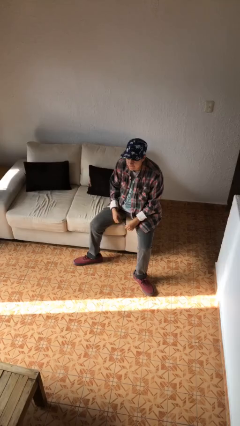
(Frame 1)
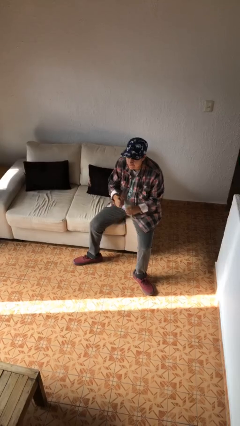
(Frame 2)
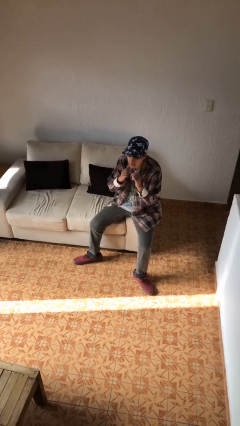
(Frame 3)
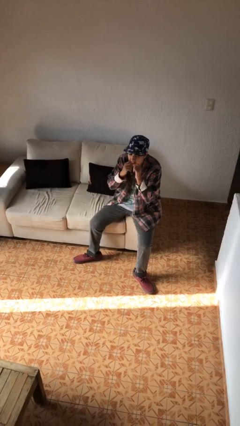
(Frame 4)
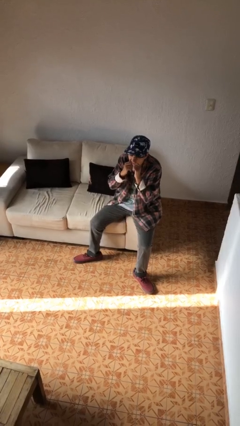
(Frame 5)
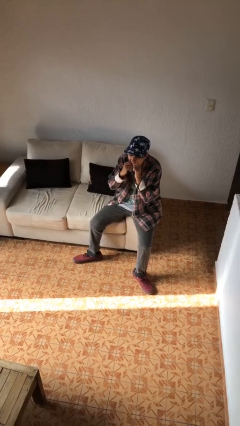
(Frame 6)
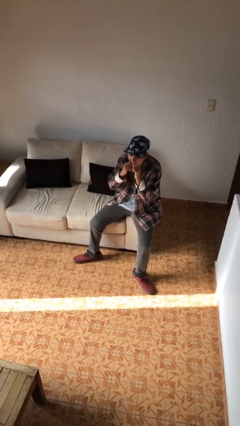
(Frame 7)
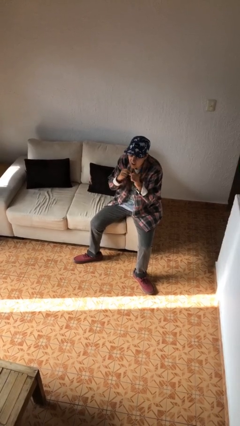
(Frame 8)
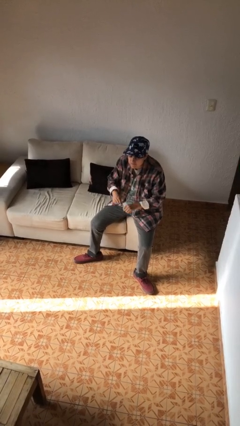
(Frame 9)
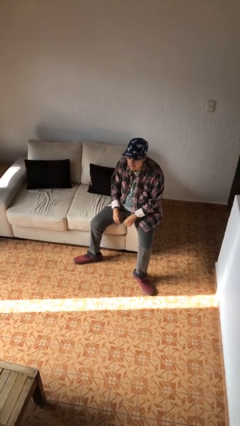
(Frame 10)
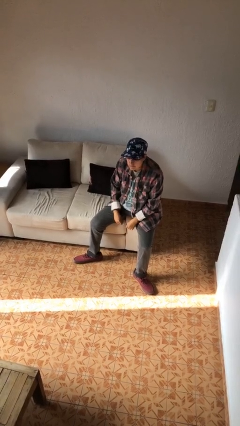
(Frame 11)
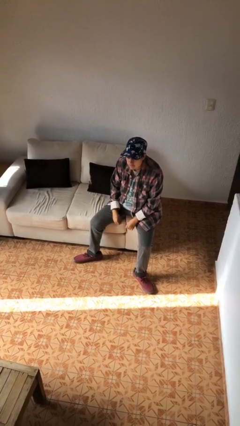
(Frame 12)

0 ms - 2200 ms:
person flosses

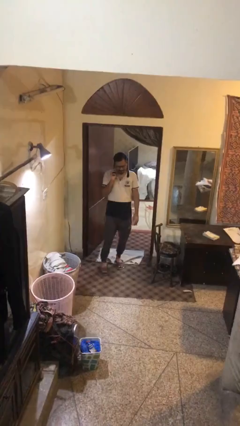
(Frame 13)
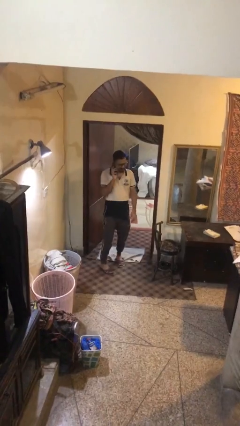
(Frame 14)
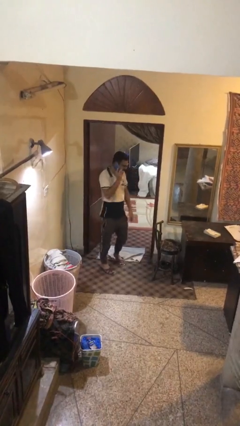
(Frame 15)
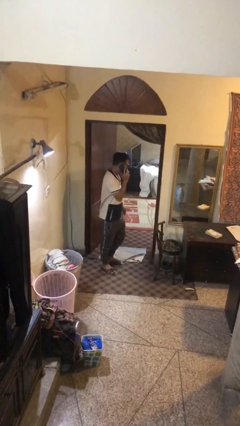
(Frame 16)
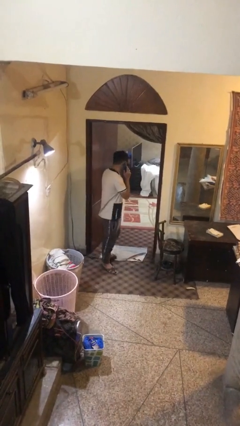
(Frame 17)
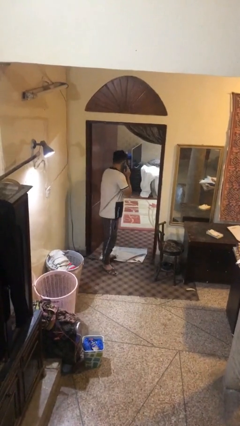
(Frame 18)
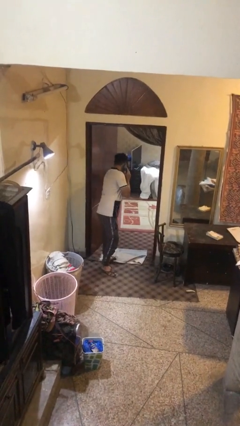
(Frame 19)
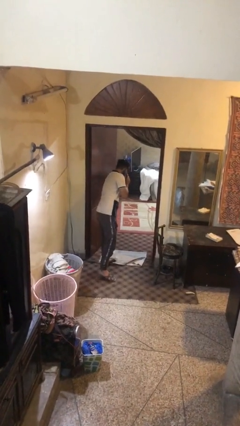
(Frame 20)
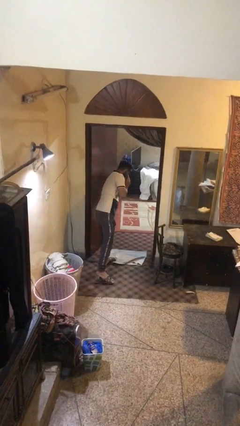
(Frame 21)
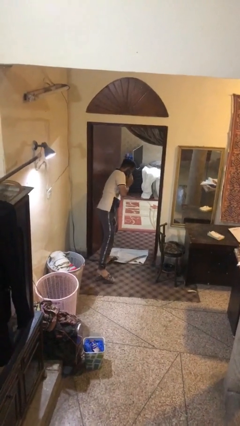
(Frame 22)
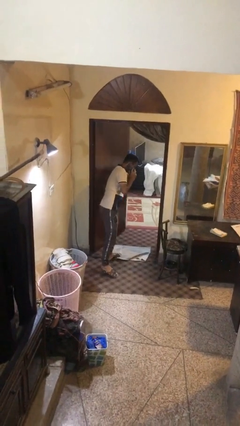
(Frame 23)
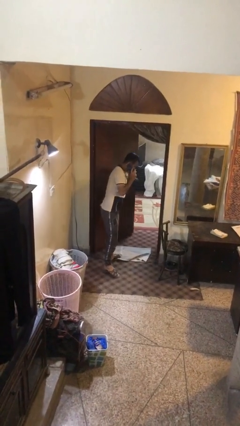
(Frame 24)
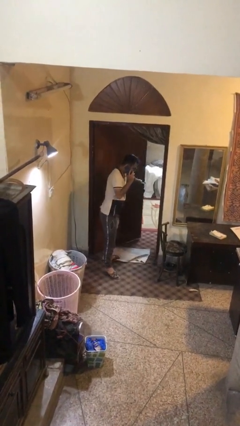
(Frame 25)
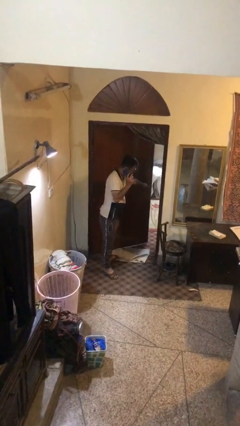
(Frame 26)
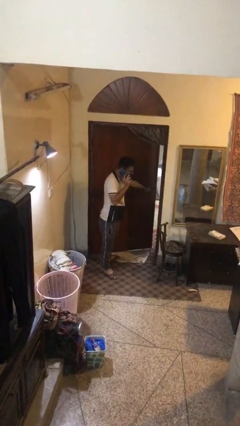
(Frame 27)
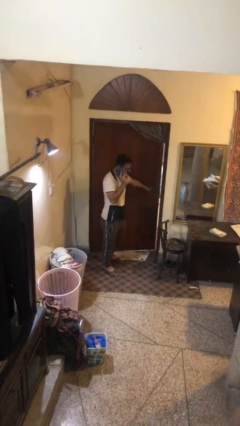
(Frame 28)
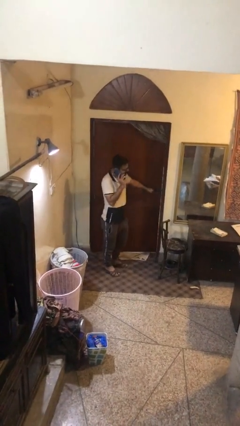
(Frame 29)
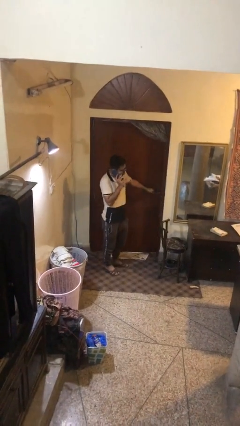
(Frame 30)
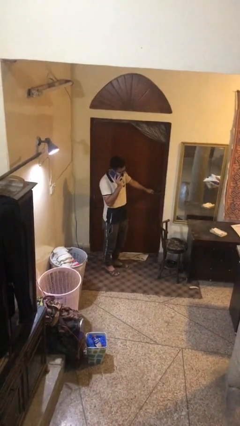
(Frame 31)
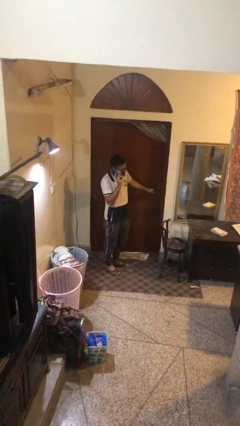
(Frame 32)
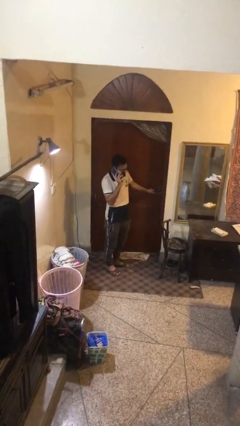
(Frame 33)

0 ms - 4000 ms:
person closes facility door

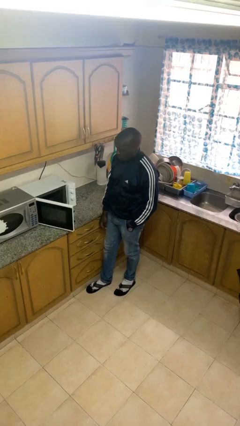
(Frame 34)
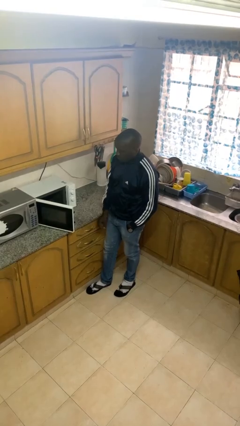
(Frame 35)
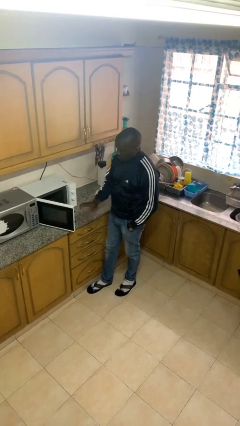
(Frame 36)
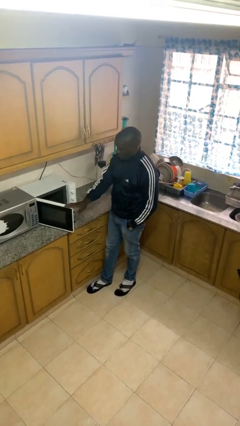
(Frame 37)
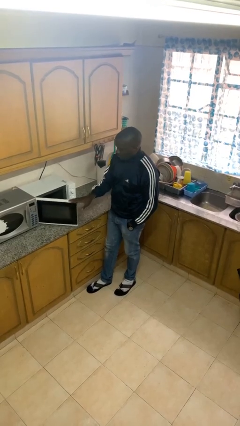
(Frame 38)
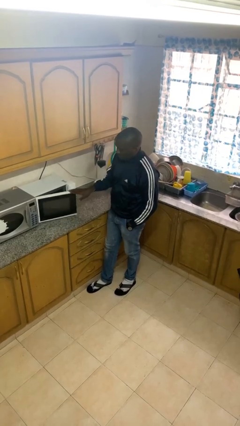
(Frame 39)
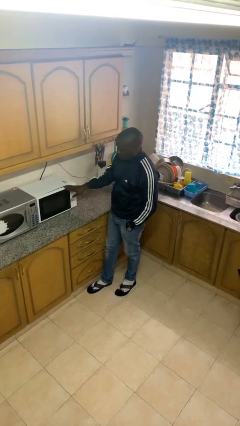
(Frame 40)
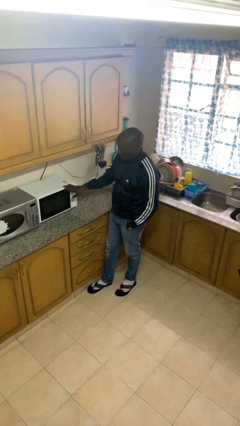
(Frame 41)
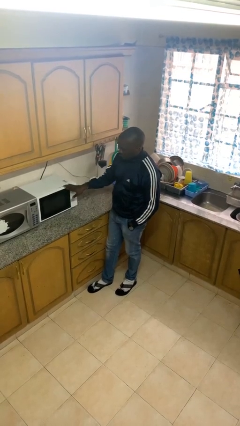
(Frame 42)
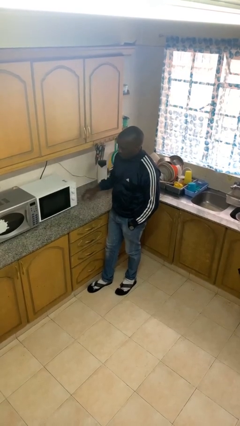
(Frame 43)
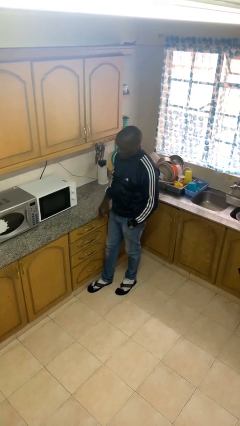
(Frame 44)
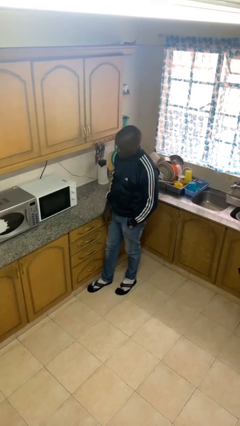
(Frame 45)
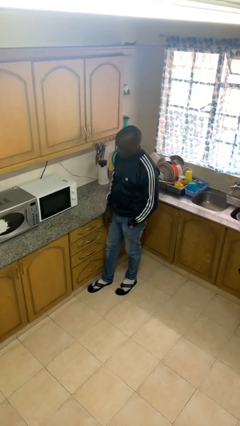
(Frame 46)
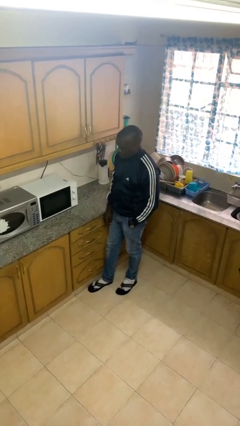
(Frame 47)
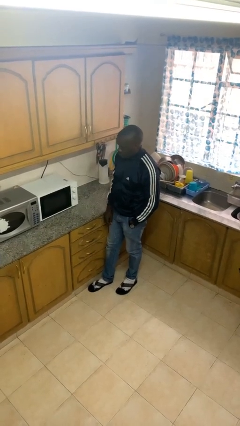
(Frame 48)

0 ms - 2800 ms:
person closes microwave

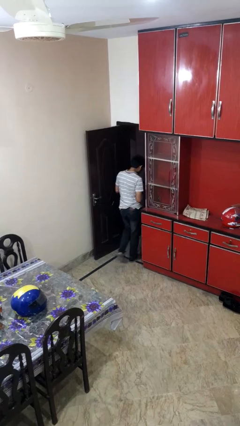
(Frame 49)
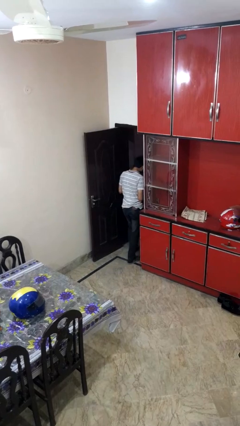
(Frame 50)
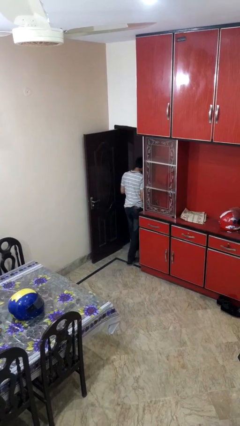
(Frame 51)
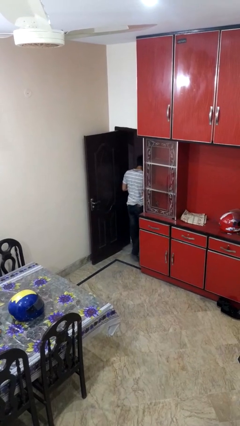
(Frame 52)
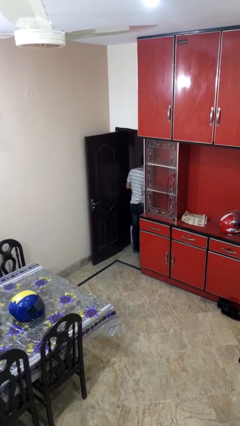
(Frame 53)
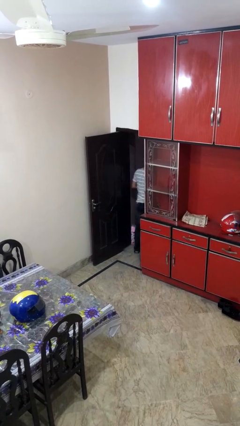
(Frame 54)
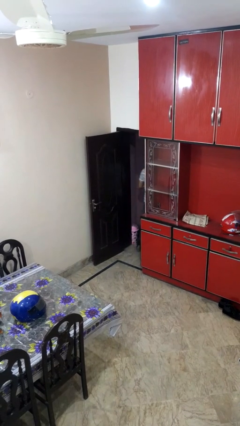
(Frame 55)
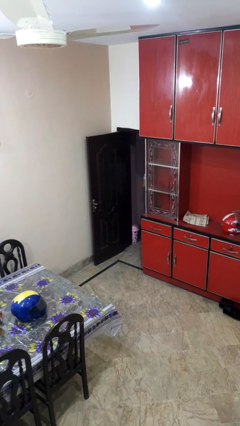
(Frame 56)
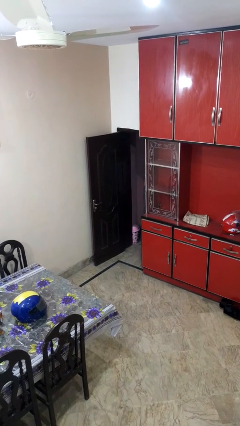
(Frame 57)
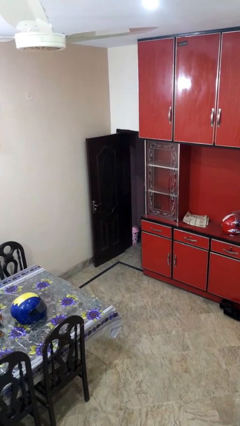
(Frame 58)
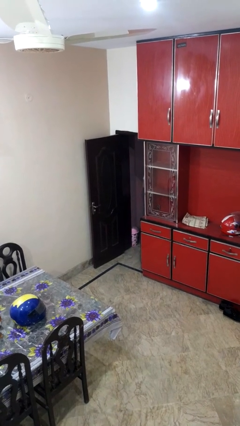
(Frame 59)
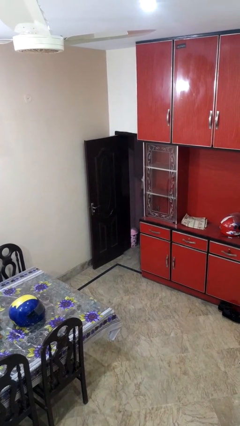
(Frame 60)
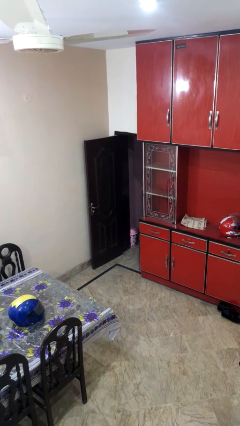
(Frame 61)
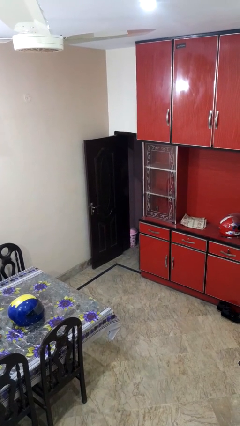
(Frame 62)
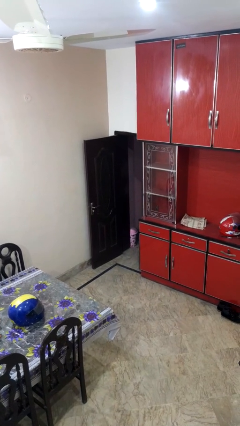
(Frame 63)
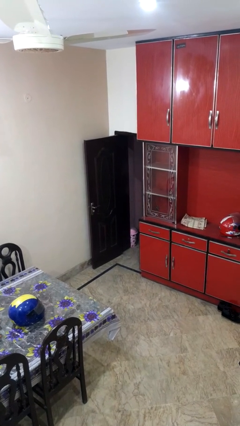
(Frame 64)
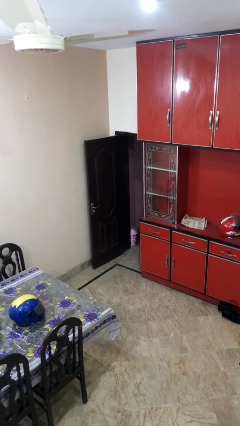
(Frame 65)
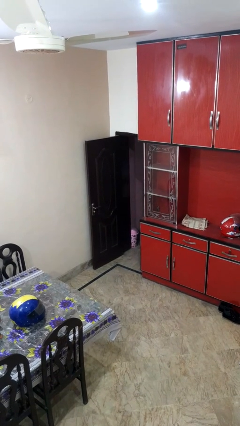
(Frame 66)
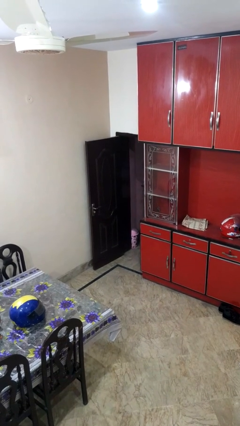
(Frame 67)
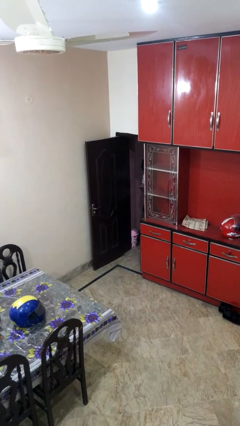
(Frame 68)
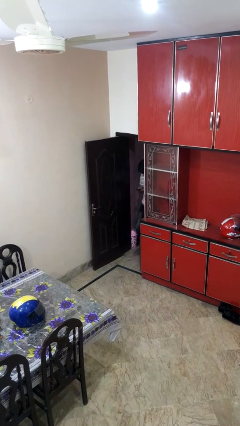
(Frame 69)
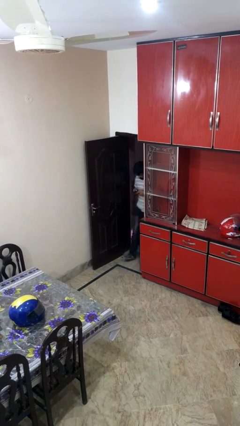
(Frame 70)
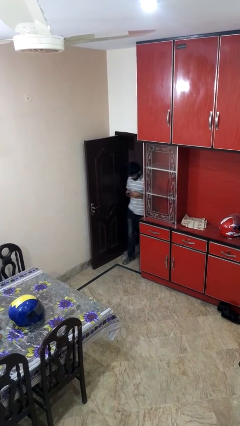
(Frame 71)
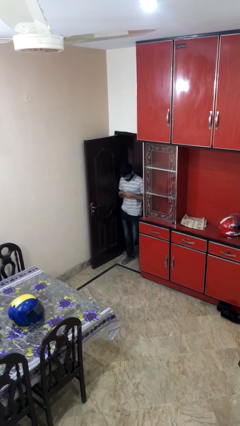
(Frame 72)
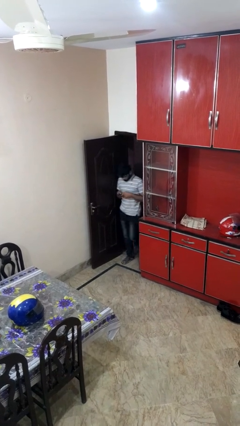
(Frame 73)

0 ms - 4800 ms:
person exits scene through structure

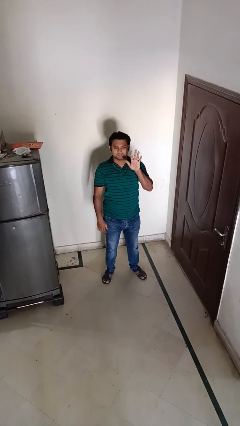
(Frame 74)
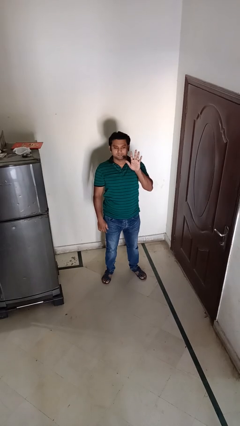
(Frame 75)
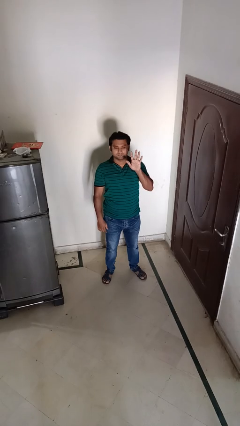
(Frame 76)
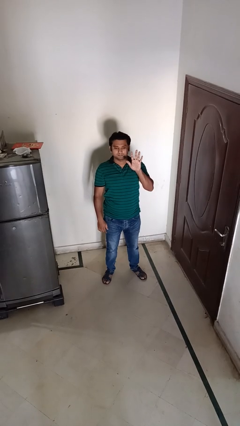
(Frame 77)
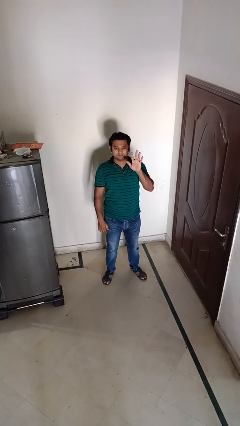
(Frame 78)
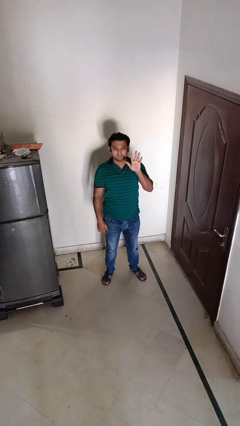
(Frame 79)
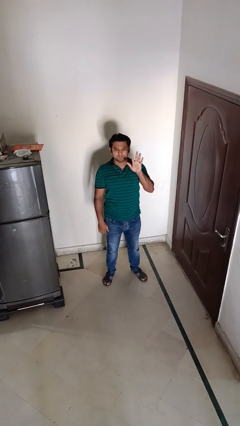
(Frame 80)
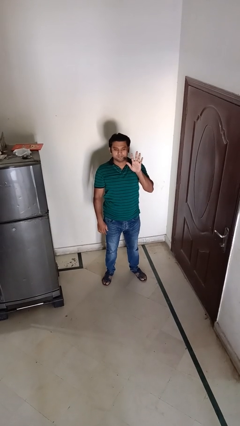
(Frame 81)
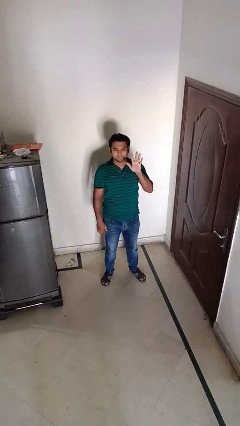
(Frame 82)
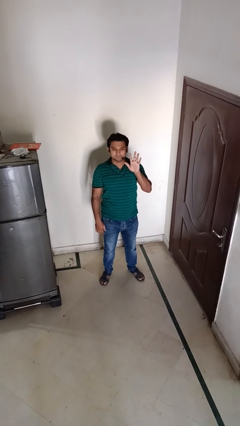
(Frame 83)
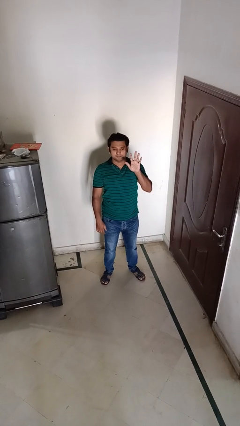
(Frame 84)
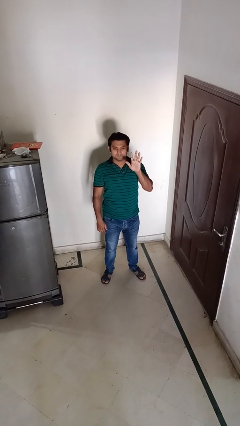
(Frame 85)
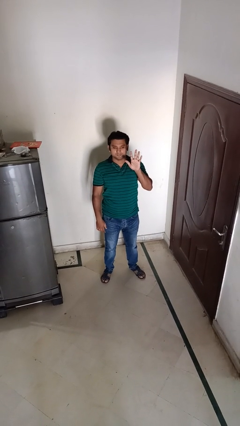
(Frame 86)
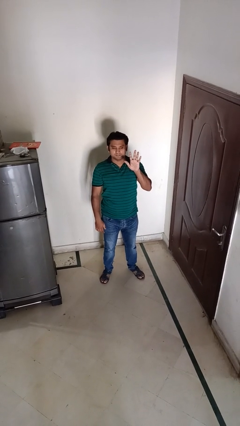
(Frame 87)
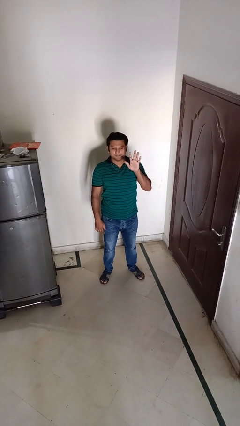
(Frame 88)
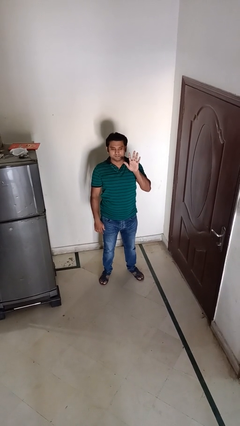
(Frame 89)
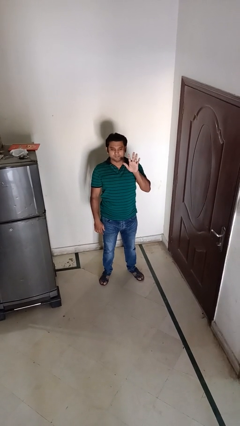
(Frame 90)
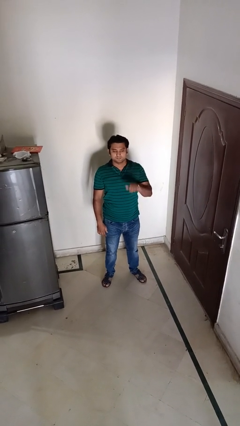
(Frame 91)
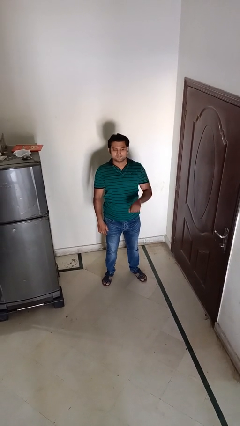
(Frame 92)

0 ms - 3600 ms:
person gestures number five
